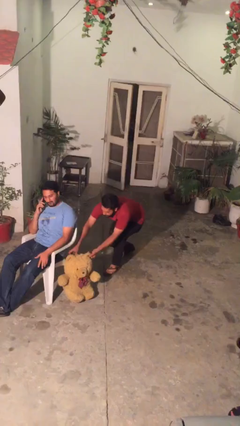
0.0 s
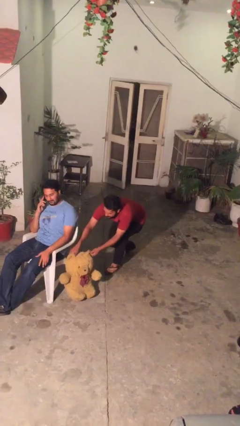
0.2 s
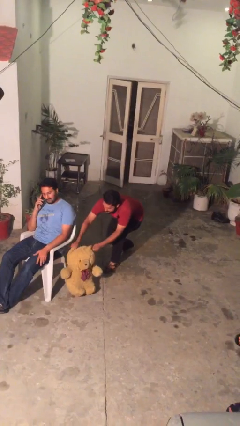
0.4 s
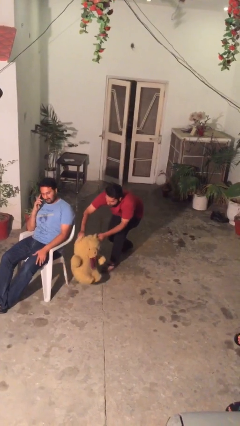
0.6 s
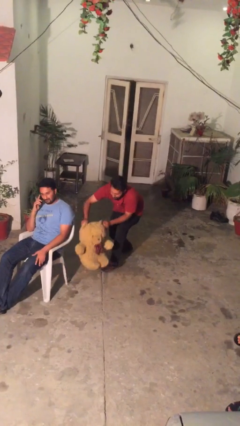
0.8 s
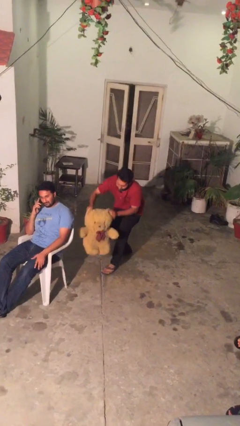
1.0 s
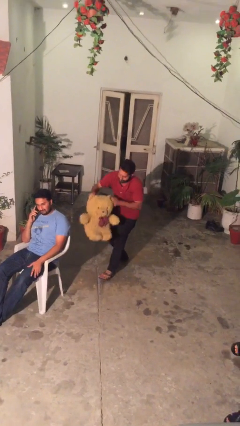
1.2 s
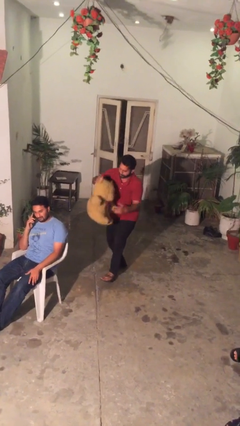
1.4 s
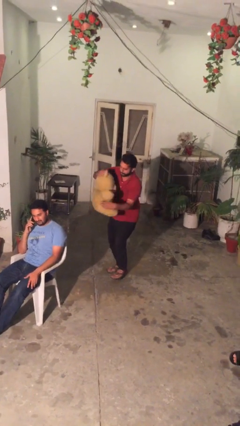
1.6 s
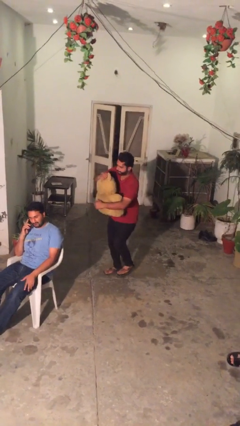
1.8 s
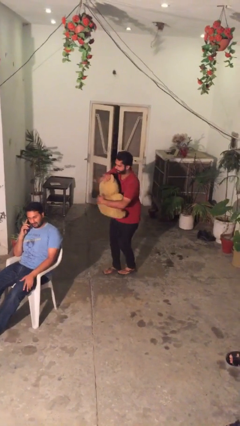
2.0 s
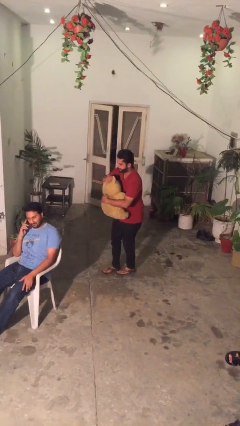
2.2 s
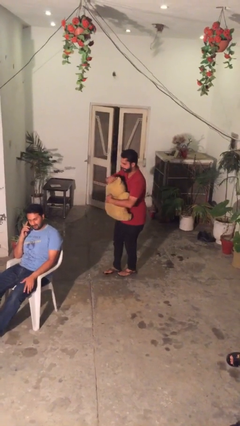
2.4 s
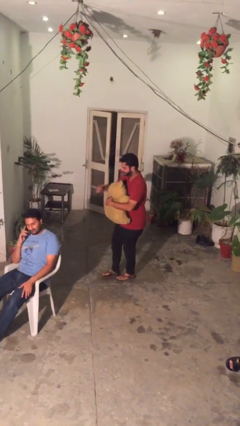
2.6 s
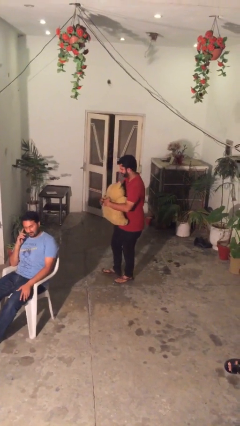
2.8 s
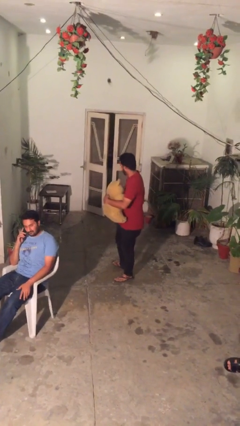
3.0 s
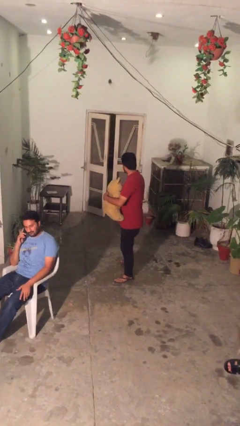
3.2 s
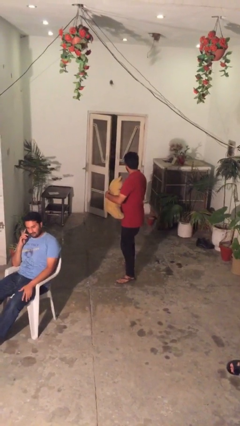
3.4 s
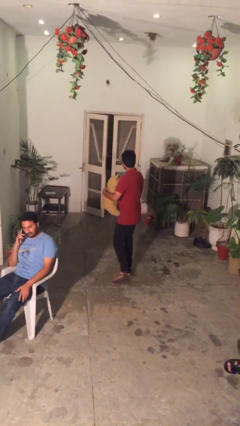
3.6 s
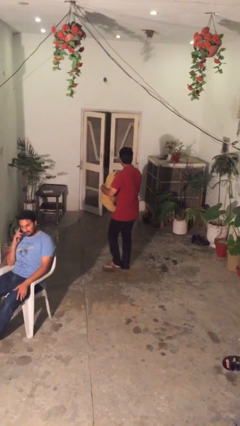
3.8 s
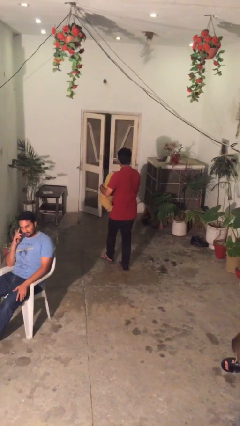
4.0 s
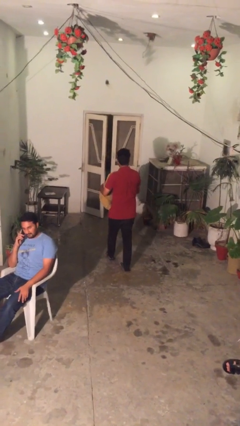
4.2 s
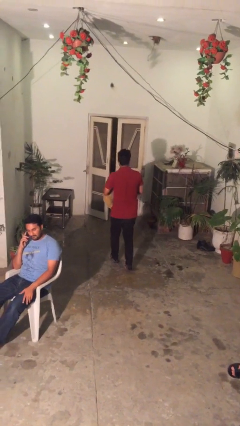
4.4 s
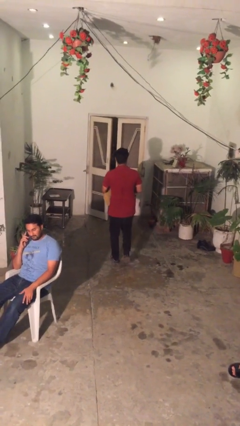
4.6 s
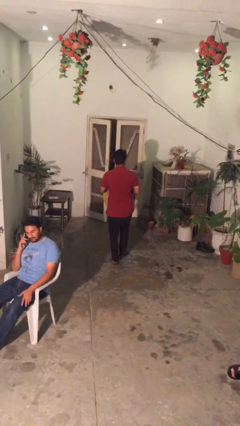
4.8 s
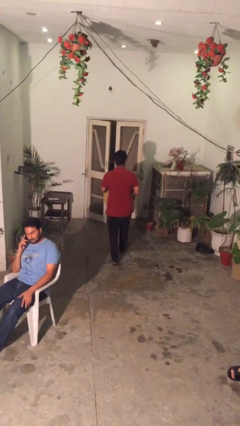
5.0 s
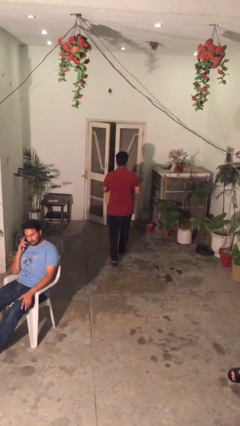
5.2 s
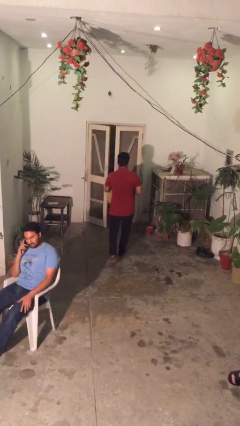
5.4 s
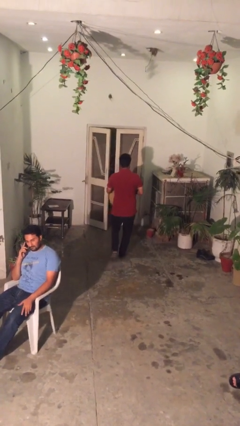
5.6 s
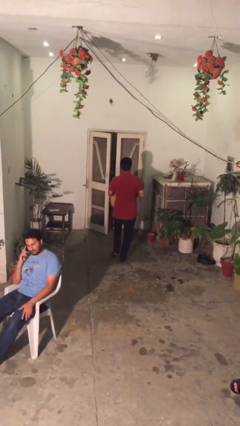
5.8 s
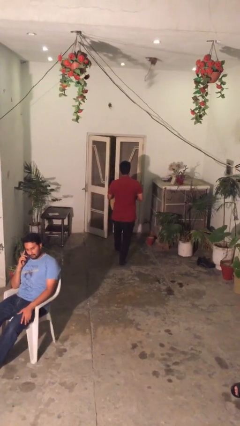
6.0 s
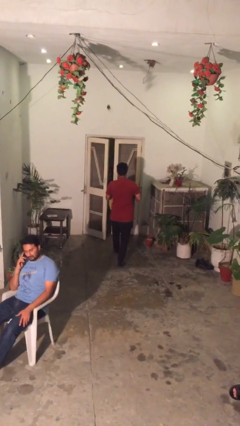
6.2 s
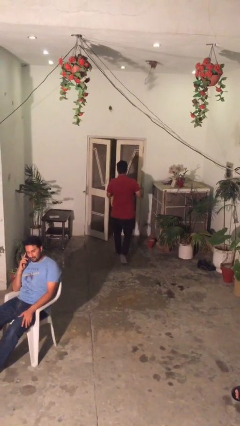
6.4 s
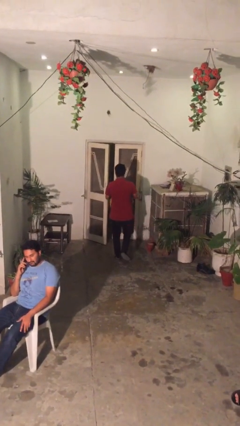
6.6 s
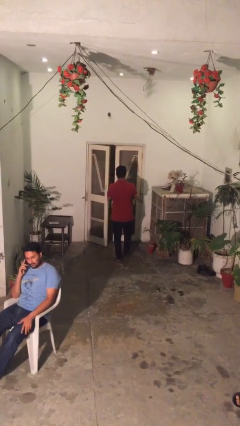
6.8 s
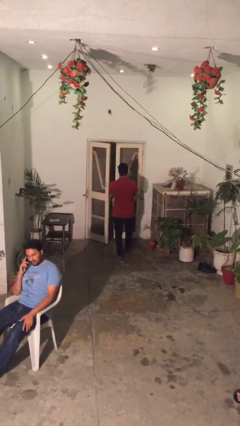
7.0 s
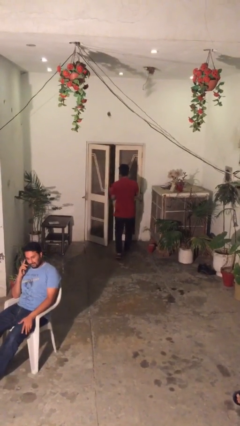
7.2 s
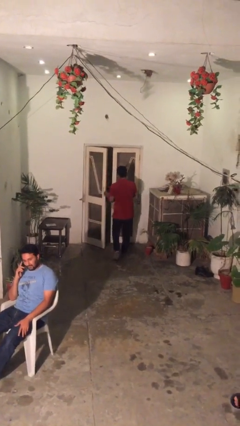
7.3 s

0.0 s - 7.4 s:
person steals object from person

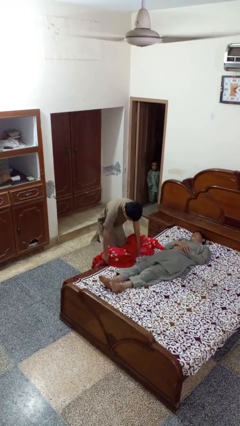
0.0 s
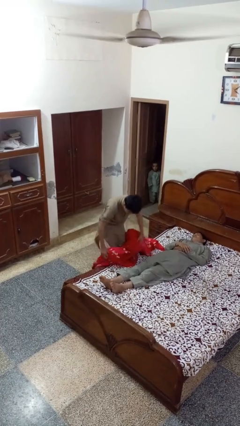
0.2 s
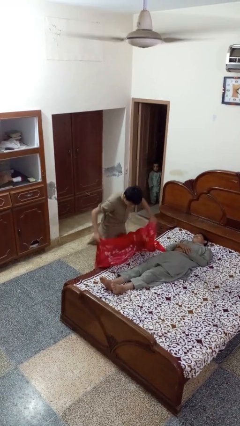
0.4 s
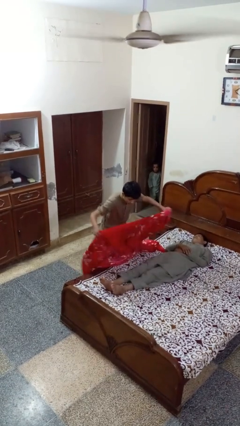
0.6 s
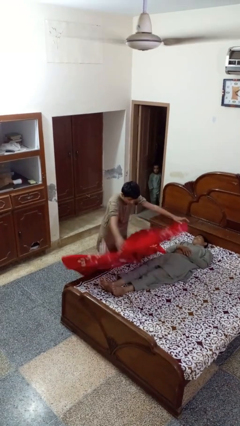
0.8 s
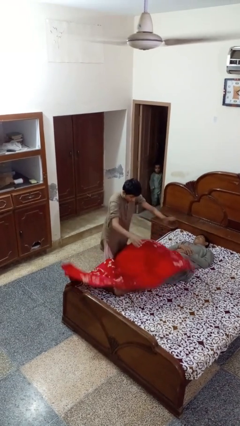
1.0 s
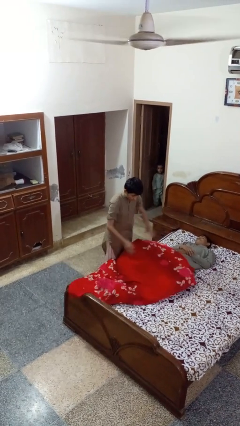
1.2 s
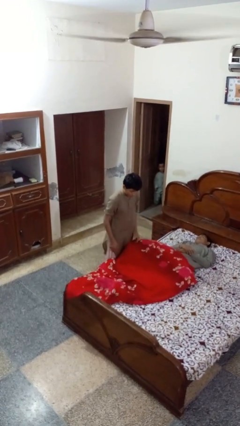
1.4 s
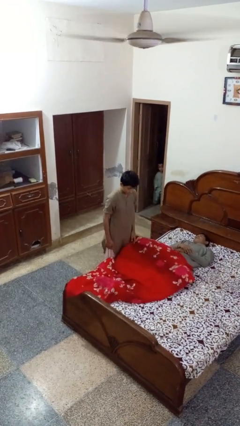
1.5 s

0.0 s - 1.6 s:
person covers friend with blanket

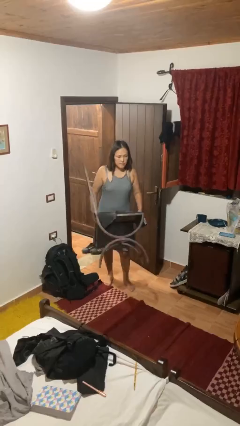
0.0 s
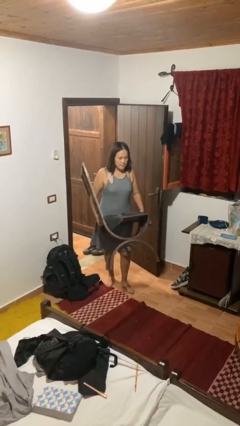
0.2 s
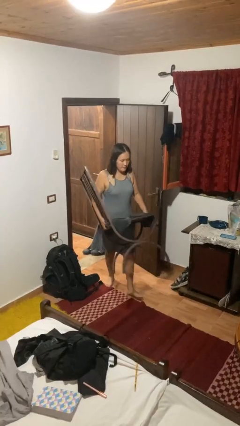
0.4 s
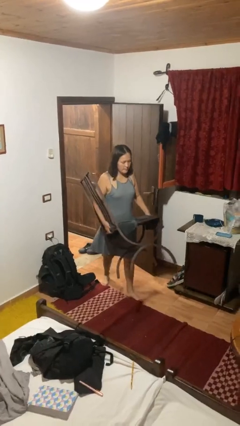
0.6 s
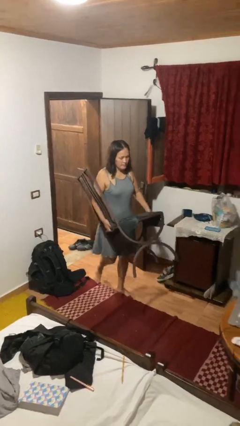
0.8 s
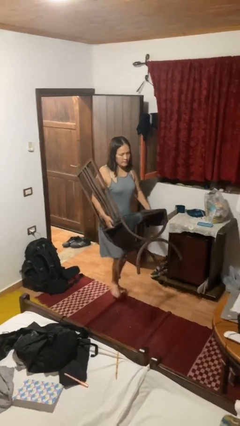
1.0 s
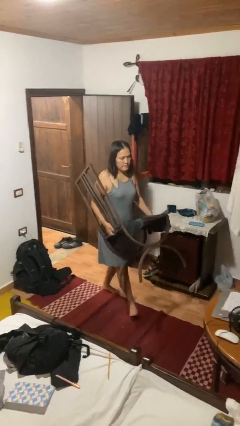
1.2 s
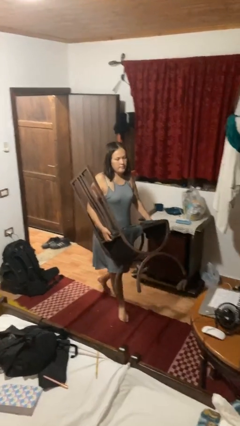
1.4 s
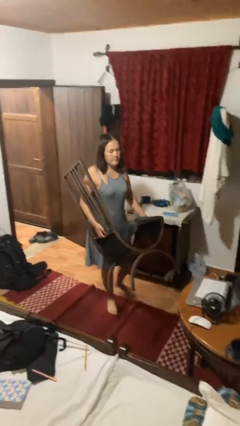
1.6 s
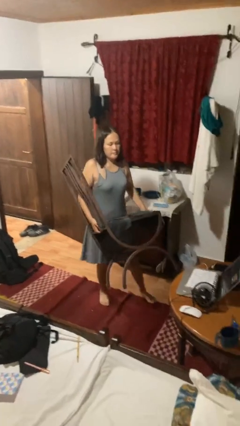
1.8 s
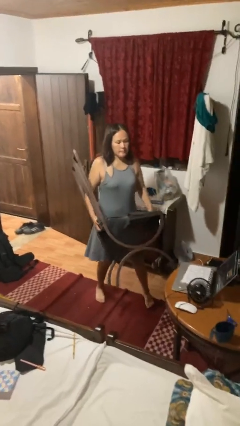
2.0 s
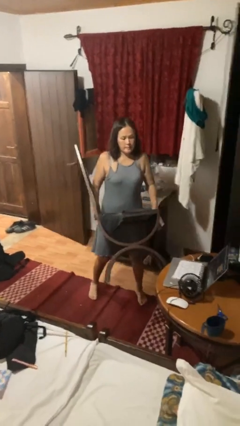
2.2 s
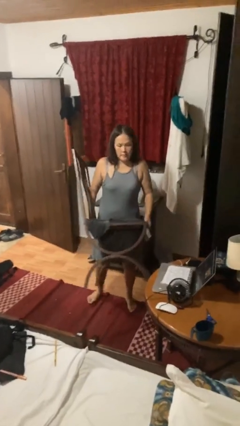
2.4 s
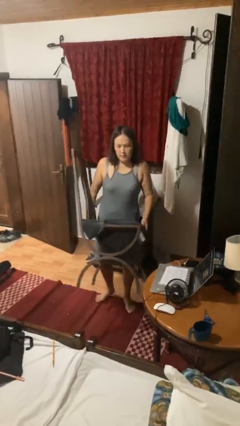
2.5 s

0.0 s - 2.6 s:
person carries furniture

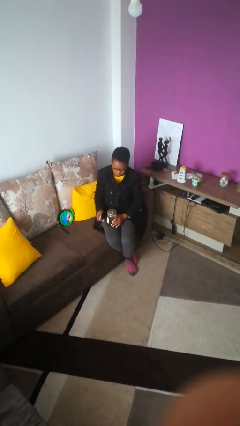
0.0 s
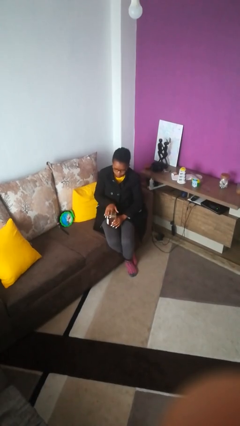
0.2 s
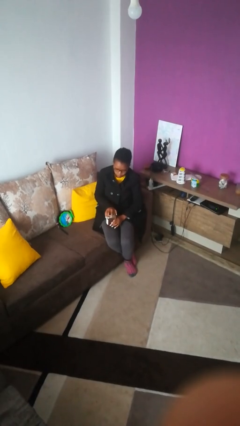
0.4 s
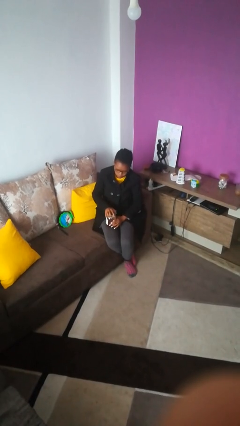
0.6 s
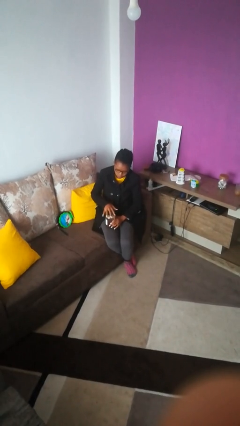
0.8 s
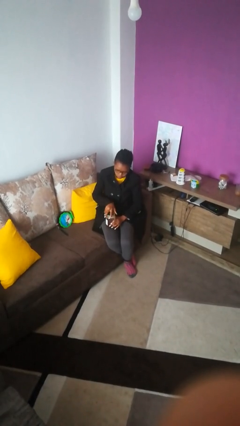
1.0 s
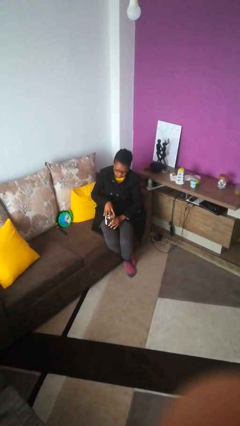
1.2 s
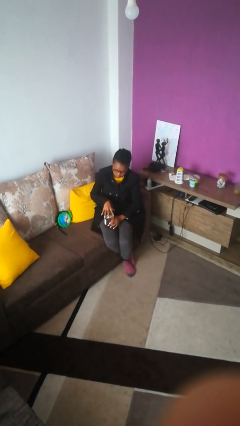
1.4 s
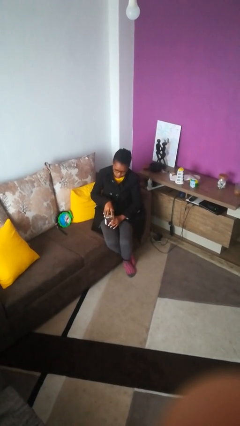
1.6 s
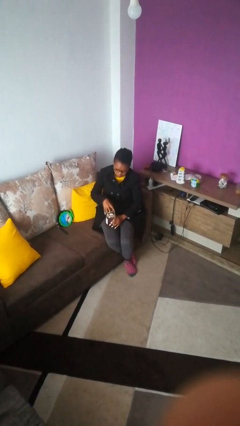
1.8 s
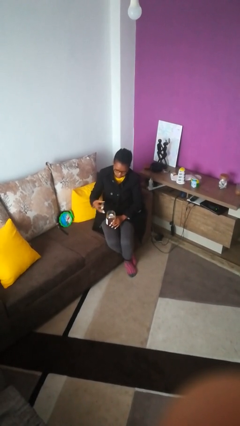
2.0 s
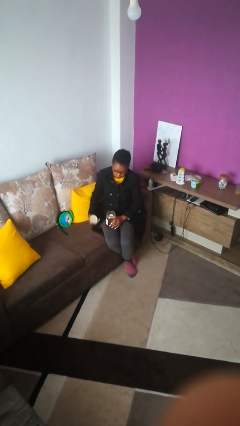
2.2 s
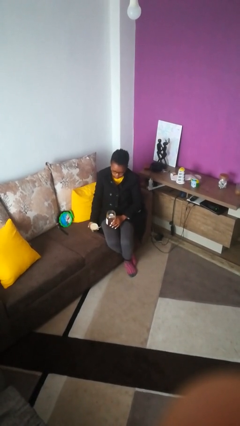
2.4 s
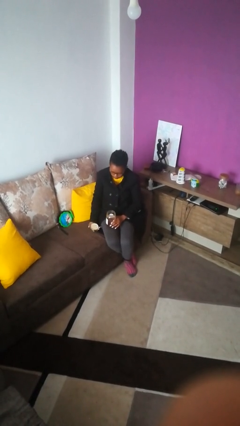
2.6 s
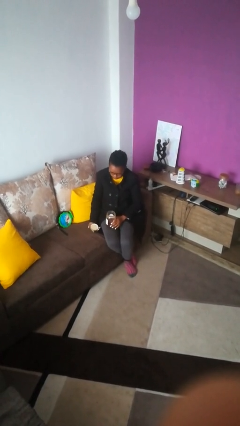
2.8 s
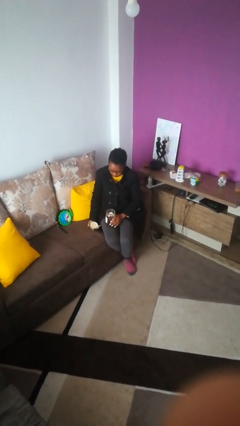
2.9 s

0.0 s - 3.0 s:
person opens jar

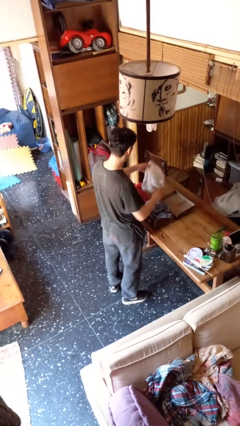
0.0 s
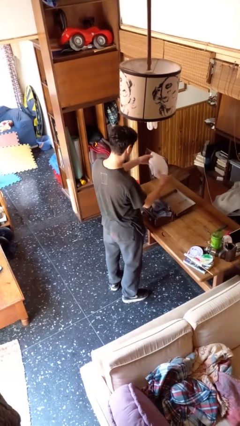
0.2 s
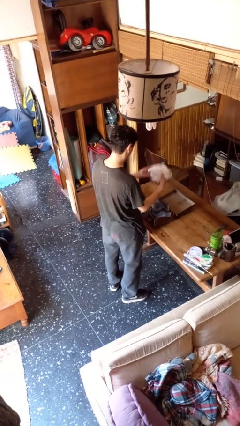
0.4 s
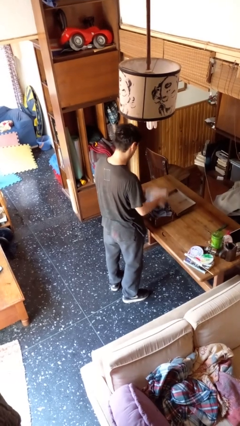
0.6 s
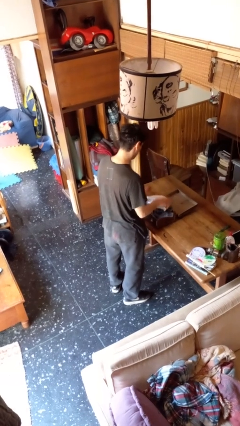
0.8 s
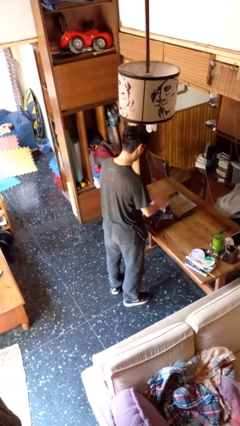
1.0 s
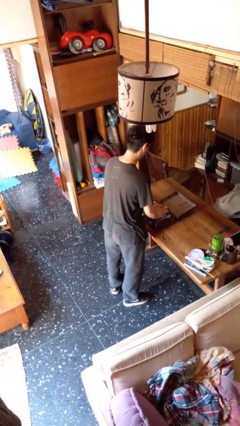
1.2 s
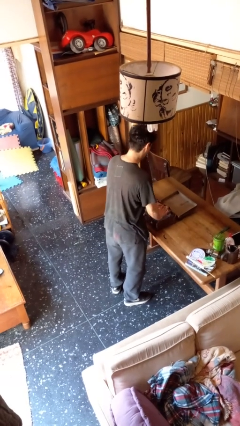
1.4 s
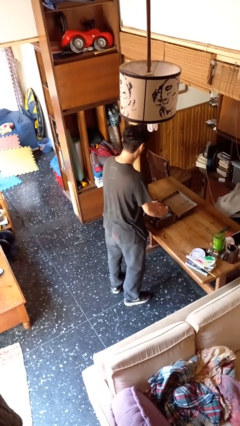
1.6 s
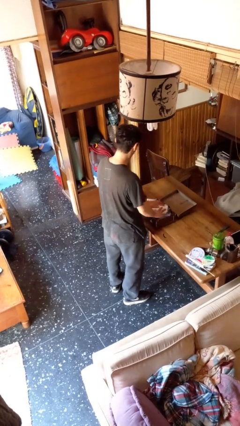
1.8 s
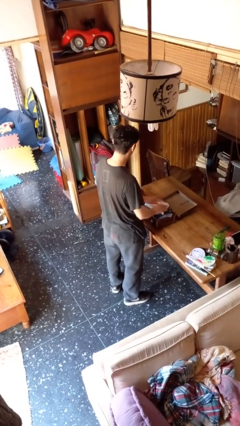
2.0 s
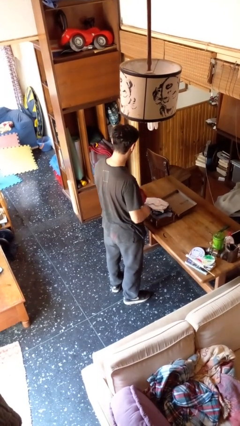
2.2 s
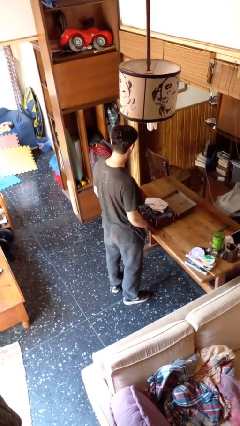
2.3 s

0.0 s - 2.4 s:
person loads clothes into suitcase

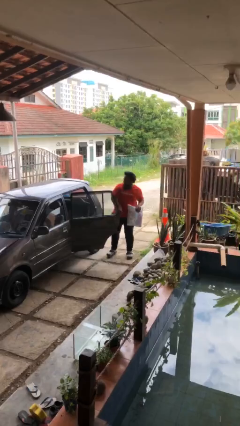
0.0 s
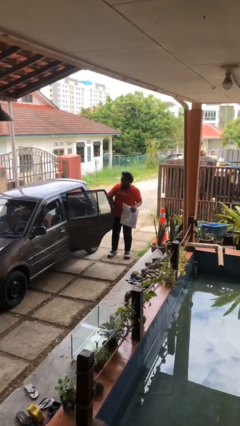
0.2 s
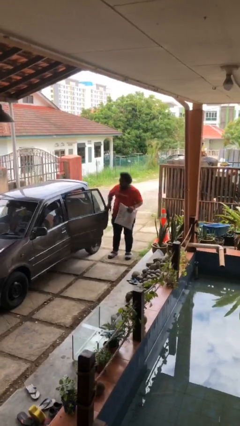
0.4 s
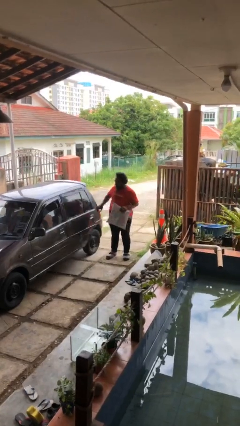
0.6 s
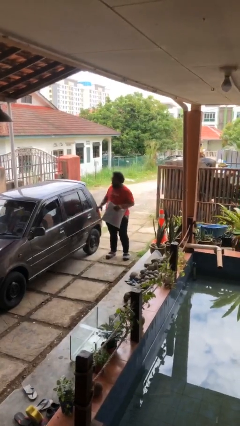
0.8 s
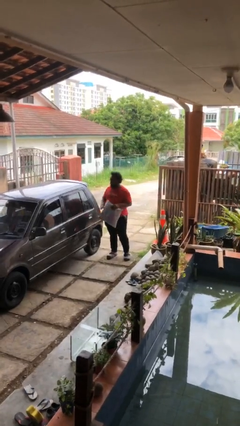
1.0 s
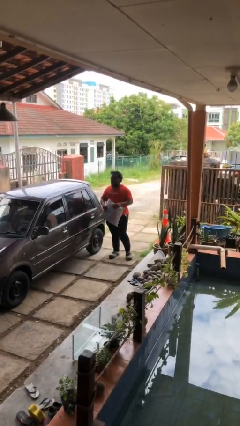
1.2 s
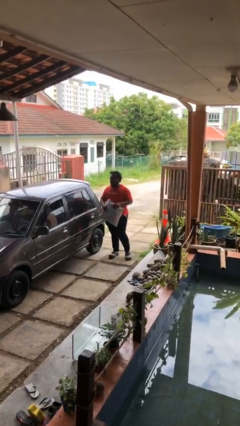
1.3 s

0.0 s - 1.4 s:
person closes car door
